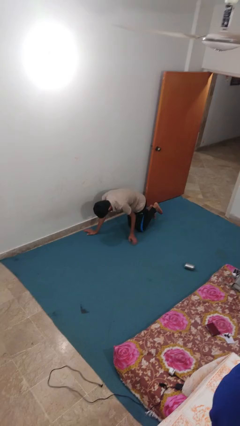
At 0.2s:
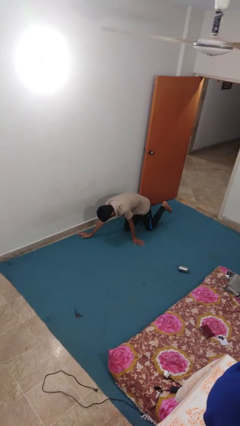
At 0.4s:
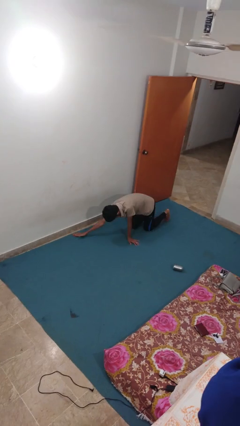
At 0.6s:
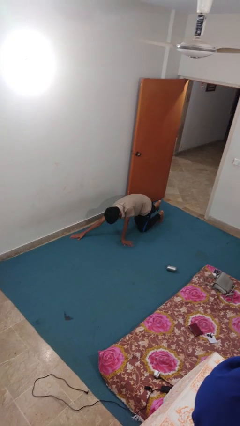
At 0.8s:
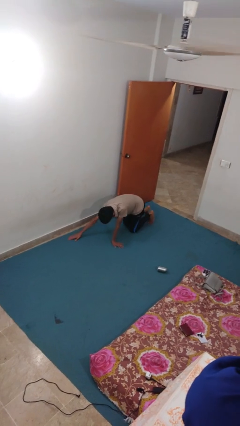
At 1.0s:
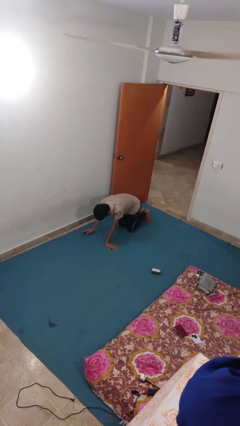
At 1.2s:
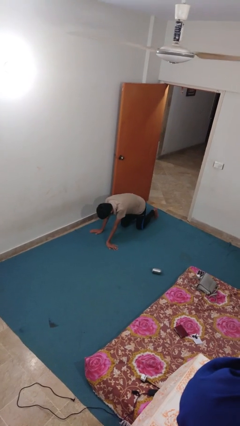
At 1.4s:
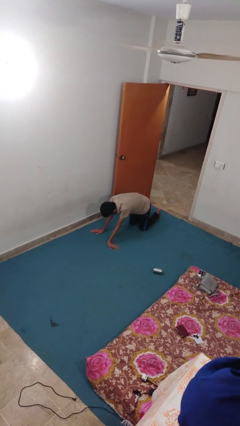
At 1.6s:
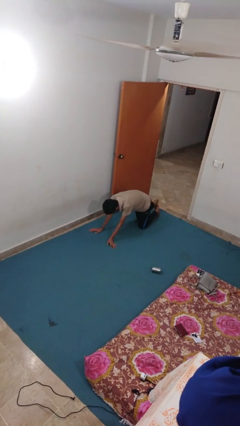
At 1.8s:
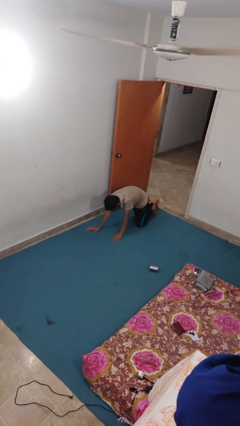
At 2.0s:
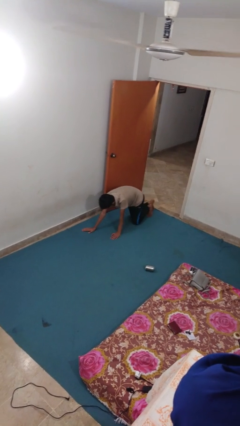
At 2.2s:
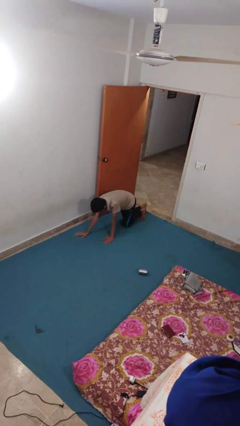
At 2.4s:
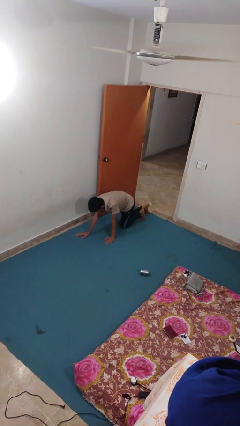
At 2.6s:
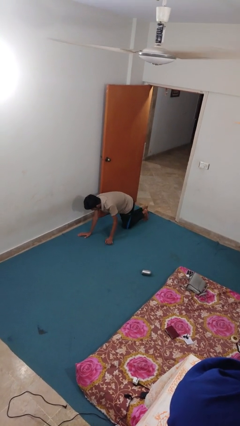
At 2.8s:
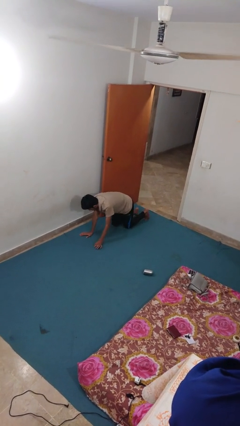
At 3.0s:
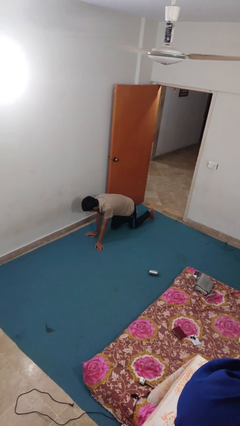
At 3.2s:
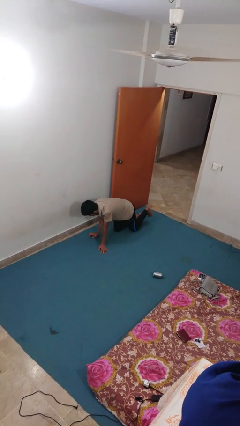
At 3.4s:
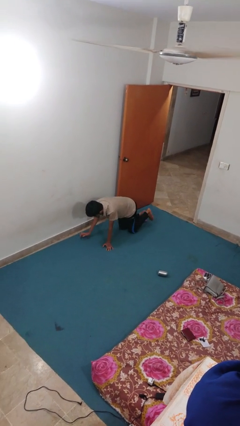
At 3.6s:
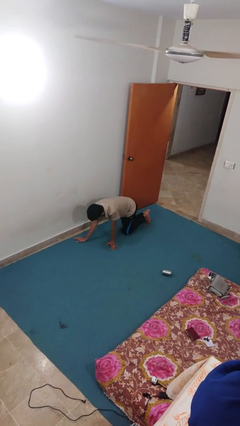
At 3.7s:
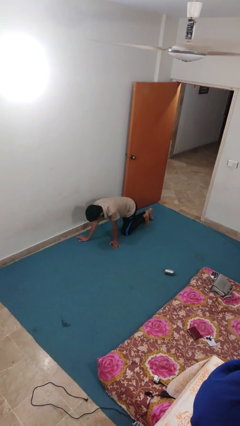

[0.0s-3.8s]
person crawls

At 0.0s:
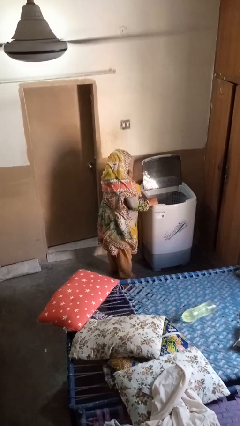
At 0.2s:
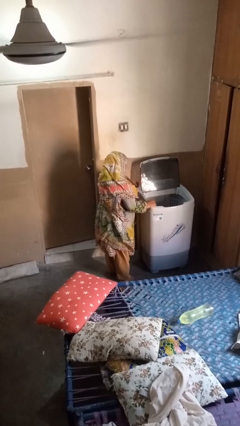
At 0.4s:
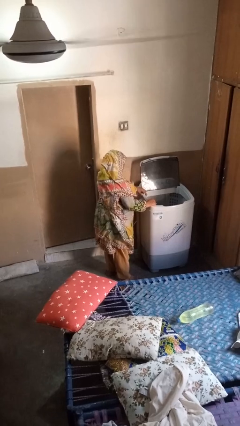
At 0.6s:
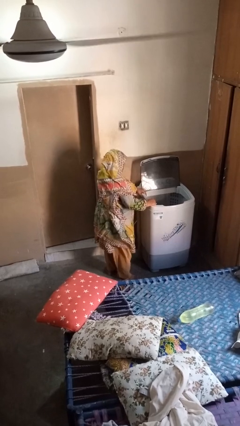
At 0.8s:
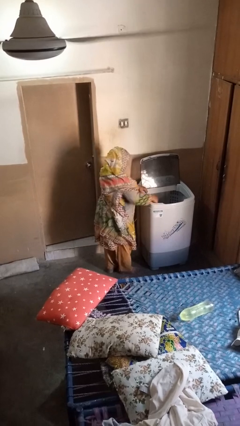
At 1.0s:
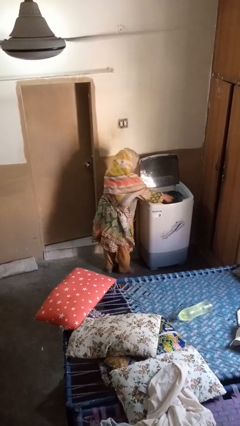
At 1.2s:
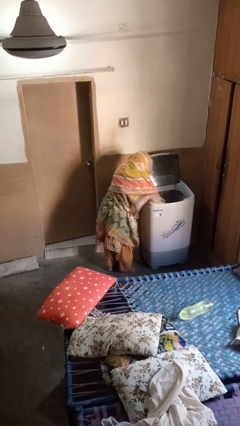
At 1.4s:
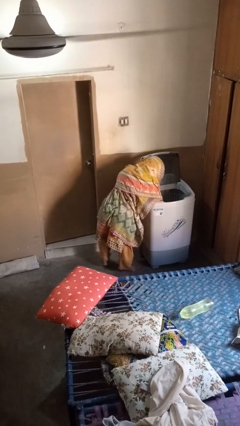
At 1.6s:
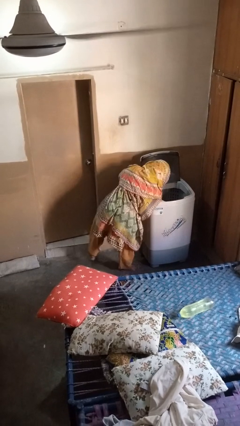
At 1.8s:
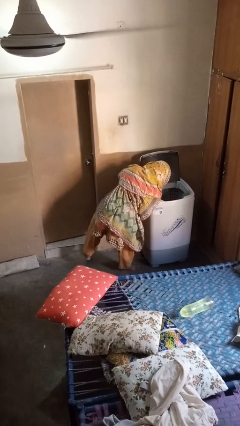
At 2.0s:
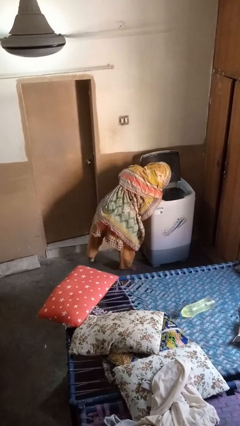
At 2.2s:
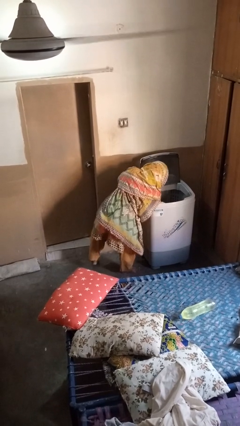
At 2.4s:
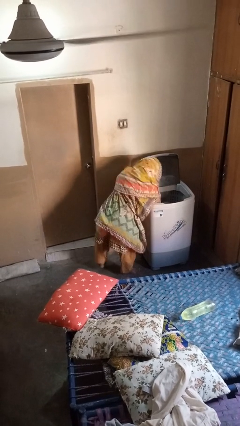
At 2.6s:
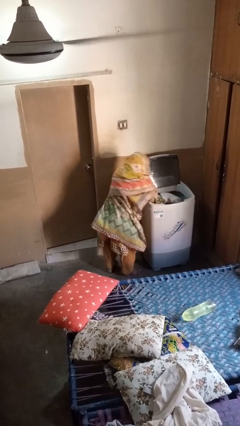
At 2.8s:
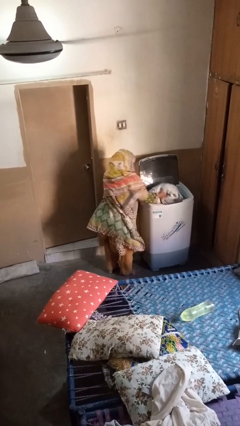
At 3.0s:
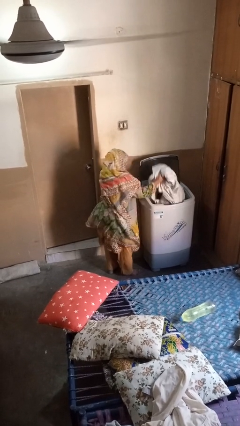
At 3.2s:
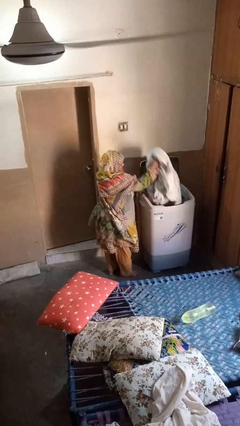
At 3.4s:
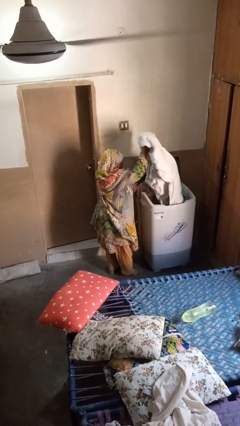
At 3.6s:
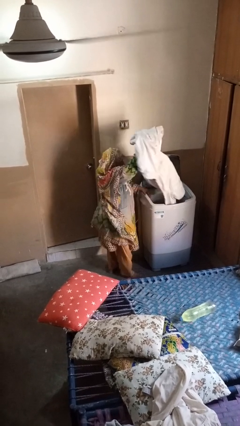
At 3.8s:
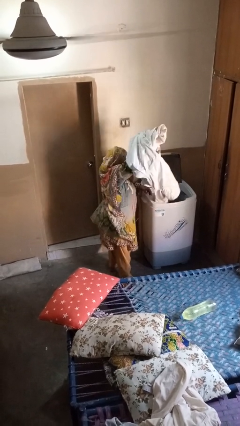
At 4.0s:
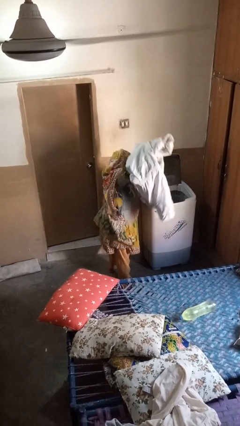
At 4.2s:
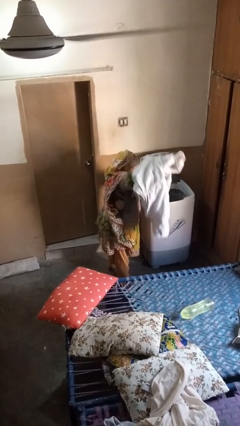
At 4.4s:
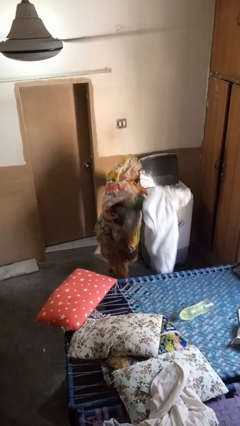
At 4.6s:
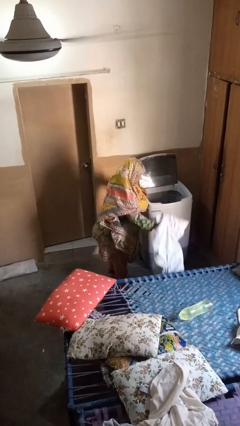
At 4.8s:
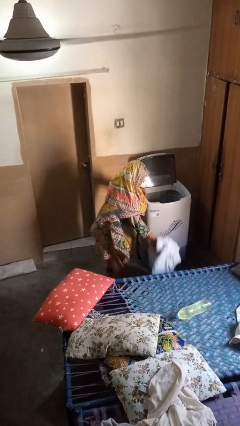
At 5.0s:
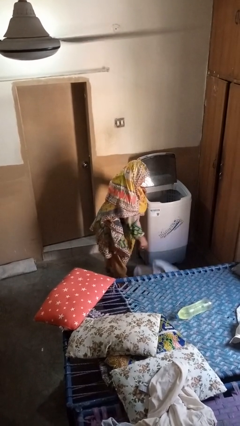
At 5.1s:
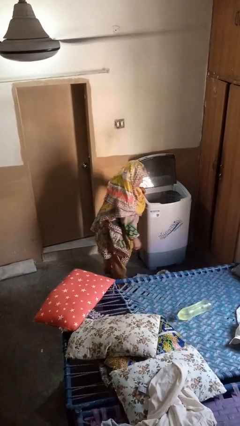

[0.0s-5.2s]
person unloads clotheswasher

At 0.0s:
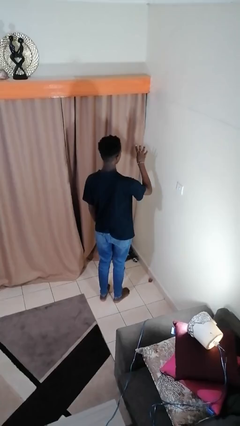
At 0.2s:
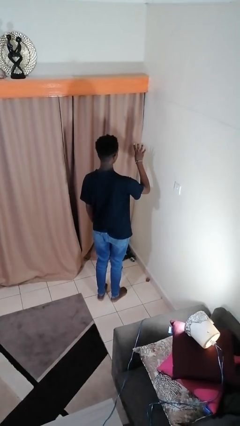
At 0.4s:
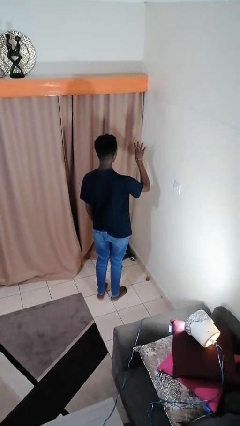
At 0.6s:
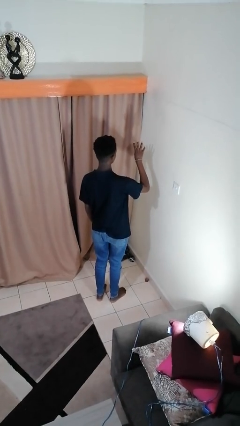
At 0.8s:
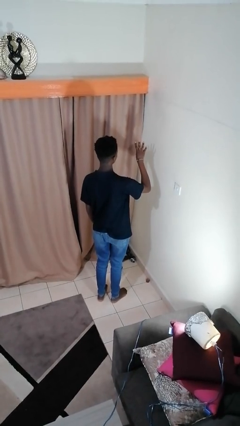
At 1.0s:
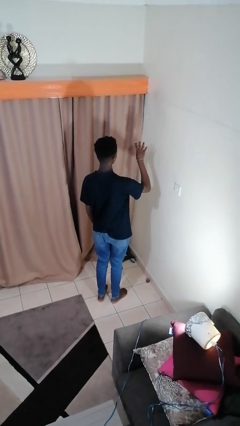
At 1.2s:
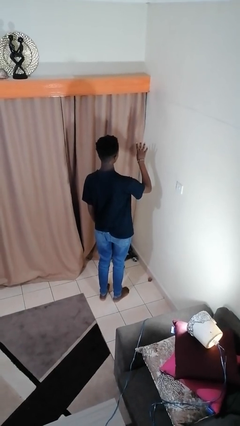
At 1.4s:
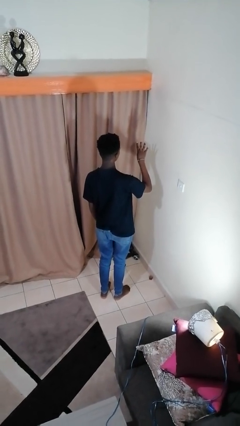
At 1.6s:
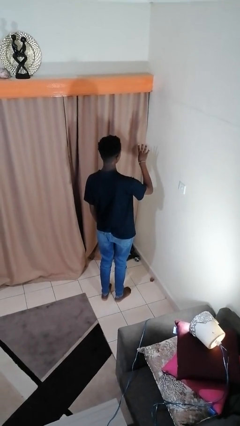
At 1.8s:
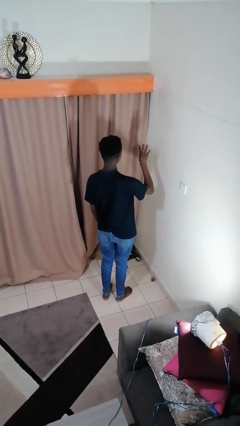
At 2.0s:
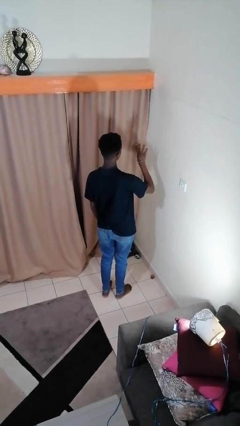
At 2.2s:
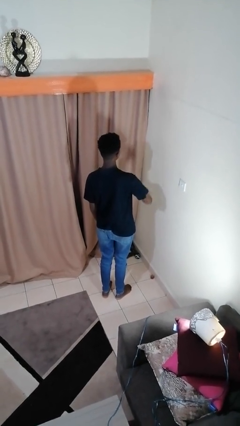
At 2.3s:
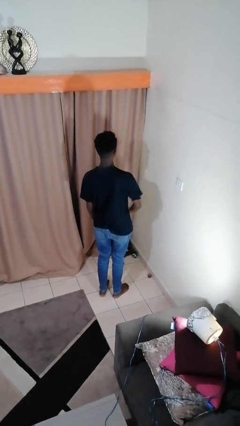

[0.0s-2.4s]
person gestures number four

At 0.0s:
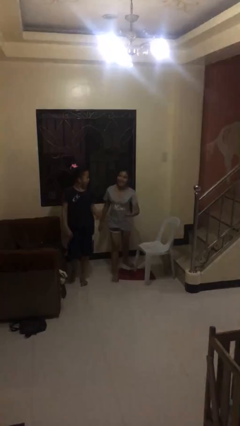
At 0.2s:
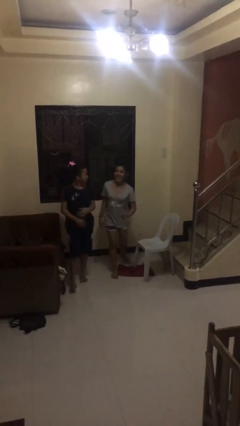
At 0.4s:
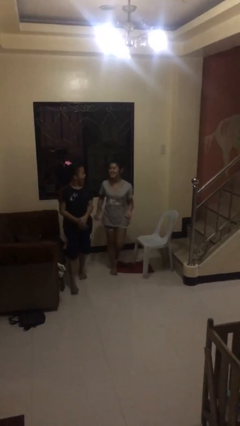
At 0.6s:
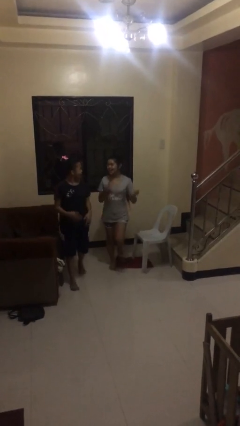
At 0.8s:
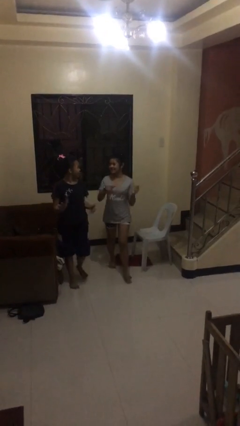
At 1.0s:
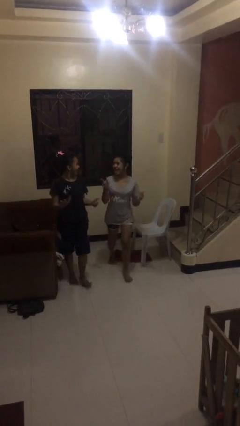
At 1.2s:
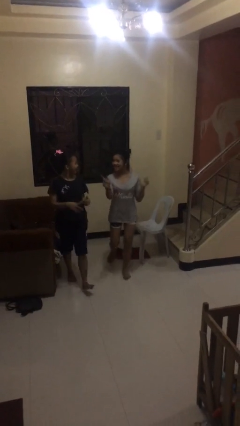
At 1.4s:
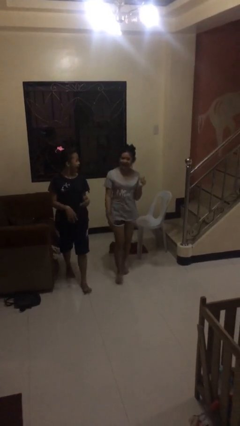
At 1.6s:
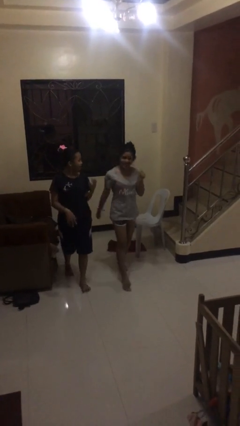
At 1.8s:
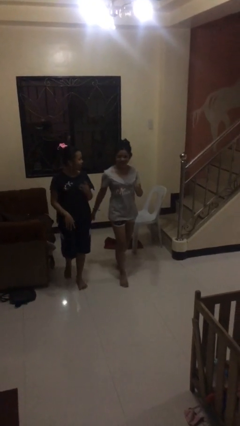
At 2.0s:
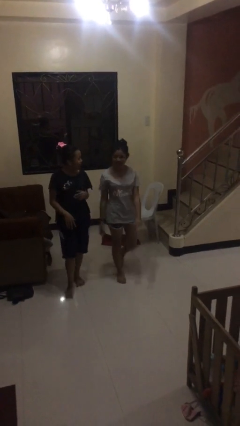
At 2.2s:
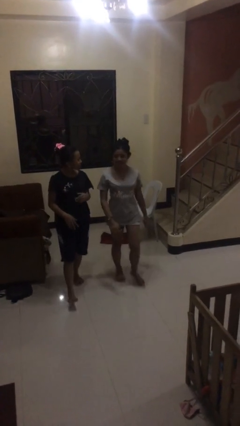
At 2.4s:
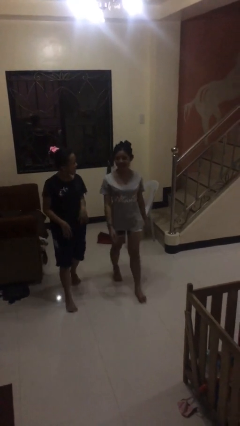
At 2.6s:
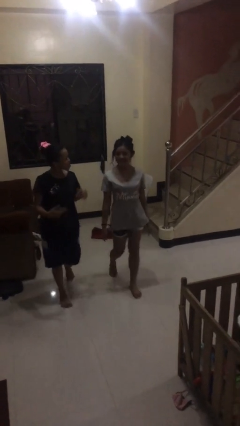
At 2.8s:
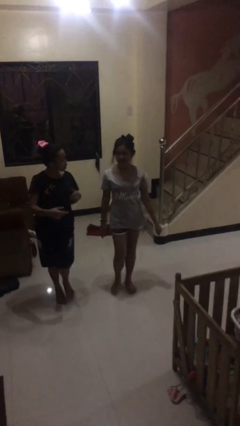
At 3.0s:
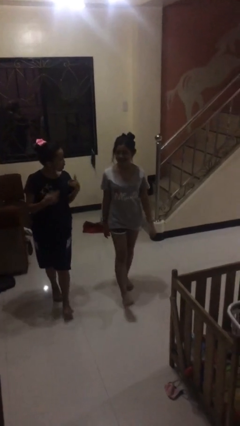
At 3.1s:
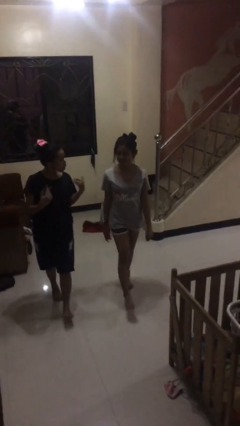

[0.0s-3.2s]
person talks to person

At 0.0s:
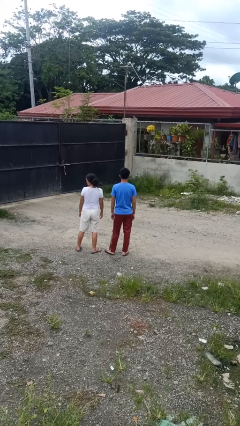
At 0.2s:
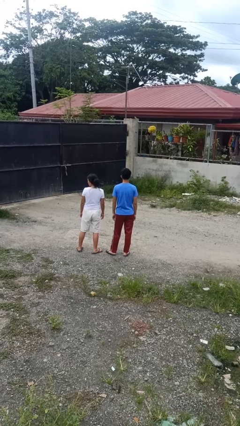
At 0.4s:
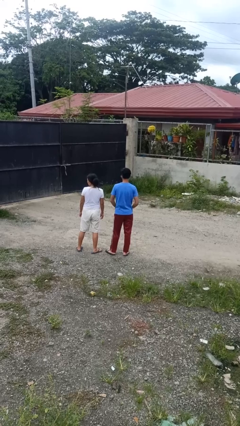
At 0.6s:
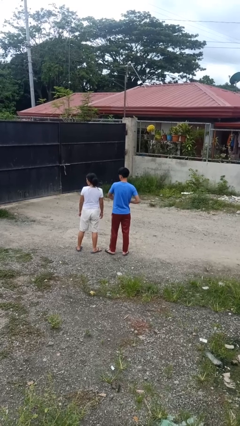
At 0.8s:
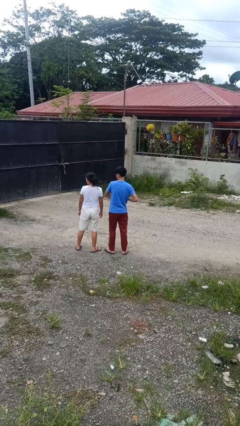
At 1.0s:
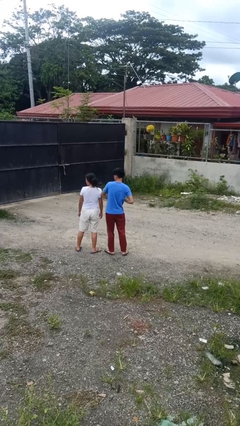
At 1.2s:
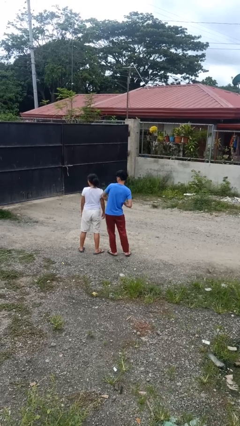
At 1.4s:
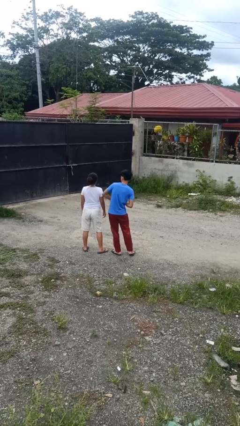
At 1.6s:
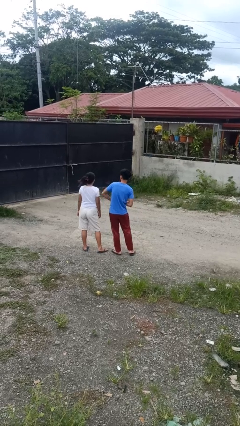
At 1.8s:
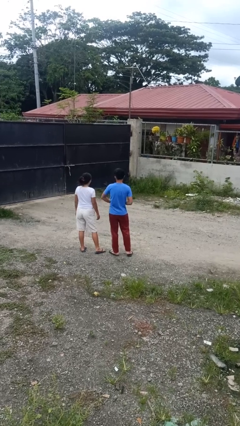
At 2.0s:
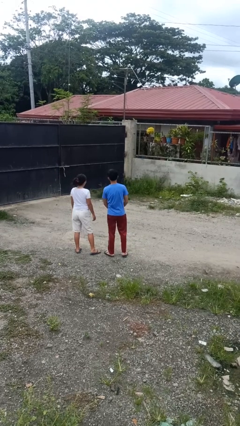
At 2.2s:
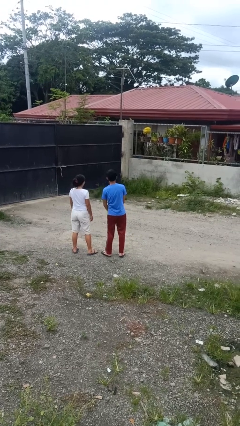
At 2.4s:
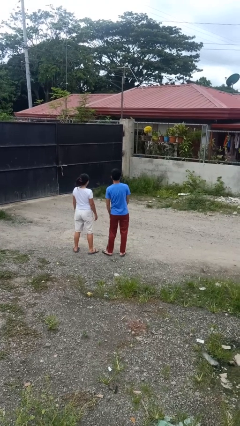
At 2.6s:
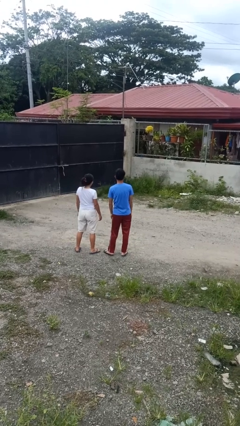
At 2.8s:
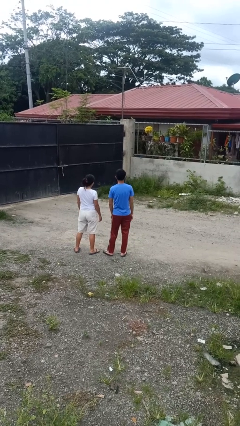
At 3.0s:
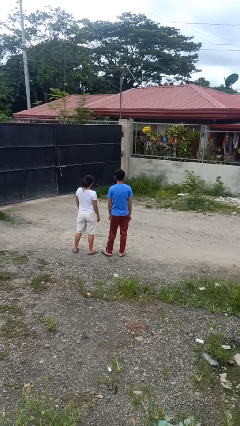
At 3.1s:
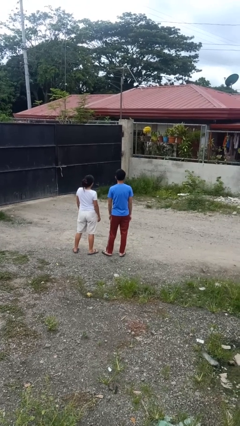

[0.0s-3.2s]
person nudges person with elbow
